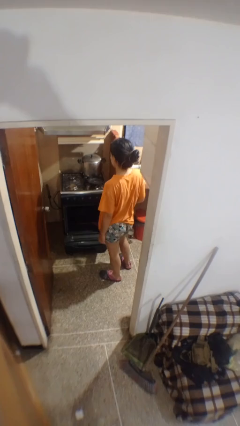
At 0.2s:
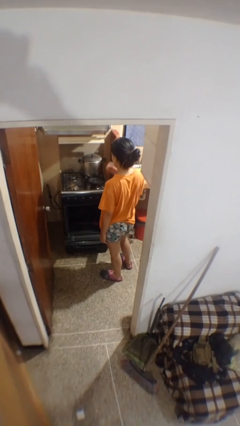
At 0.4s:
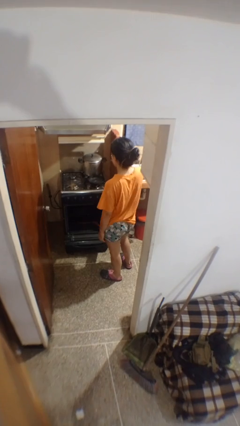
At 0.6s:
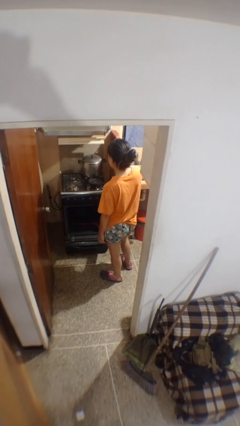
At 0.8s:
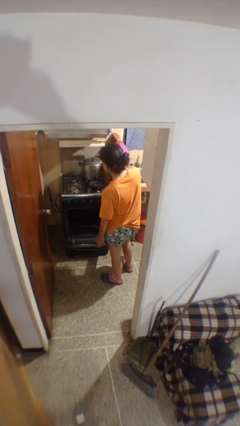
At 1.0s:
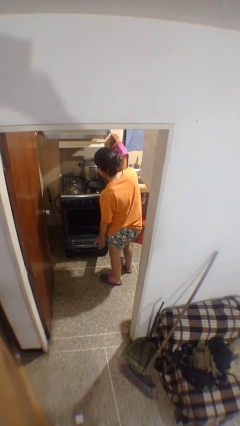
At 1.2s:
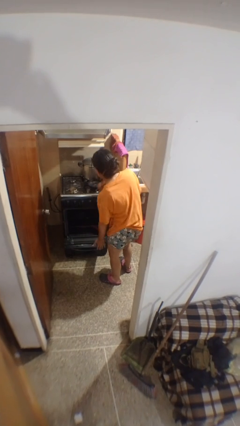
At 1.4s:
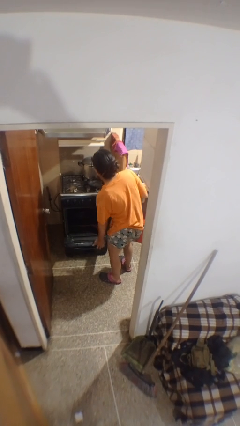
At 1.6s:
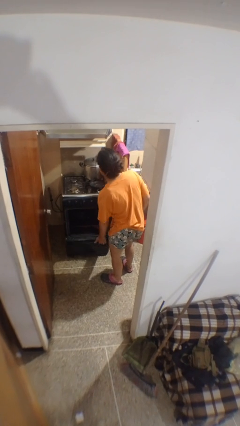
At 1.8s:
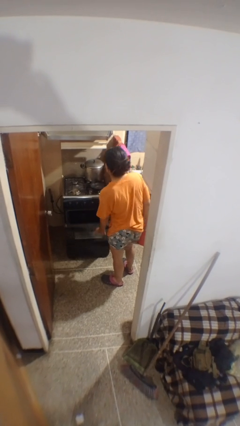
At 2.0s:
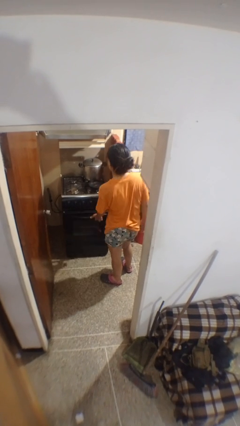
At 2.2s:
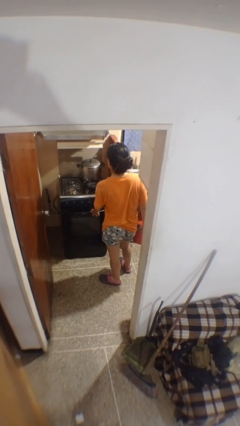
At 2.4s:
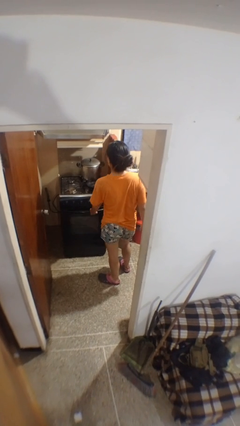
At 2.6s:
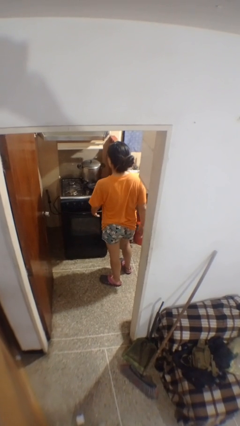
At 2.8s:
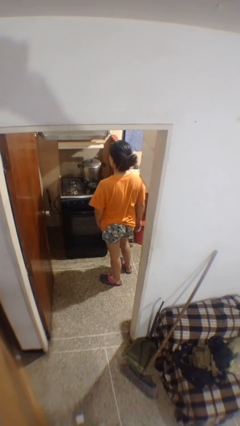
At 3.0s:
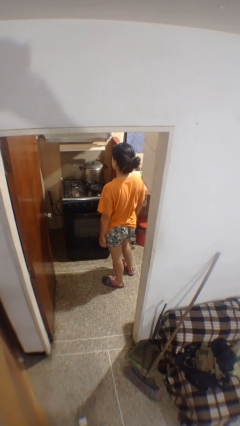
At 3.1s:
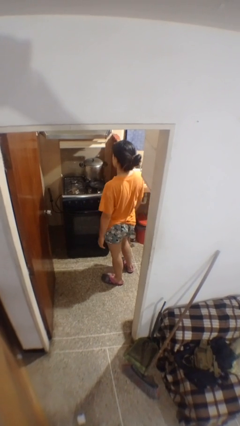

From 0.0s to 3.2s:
person closes oven door

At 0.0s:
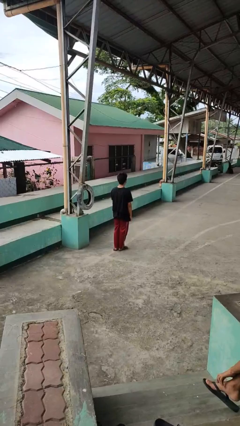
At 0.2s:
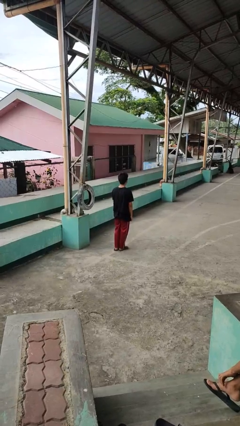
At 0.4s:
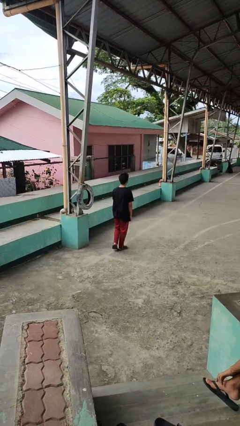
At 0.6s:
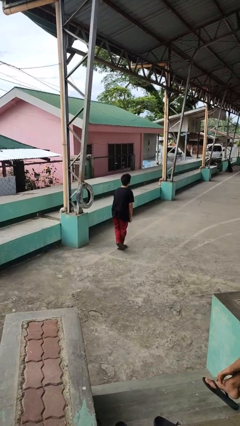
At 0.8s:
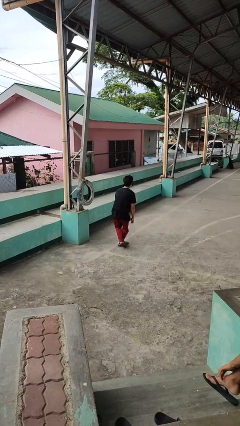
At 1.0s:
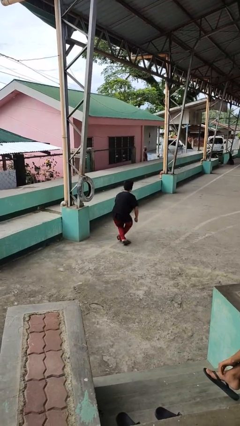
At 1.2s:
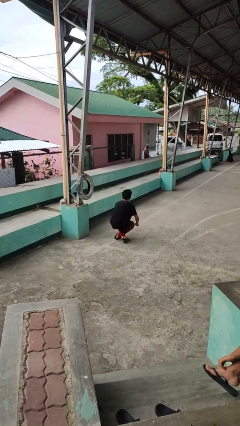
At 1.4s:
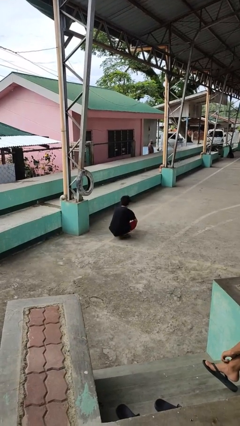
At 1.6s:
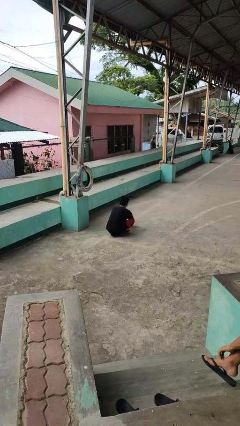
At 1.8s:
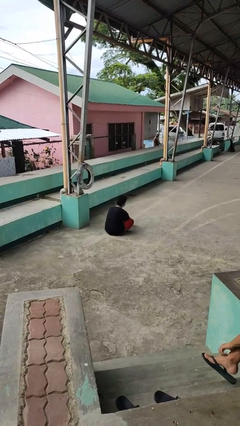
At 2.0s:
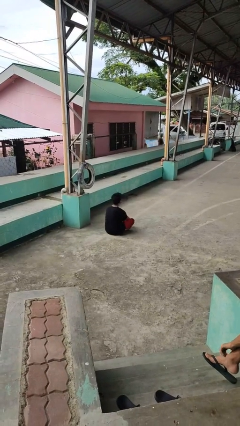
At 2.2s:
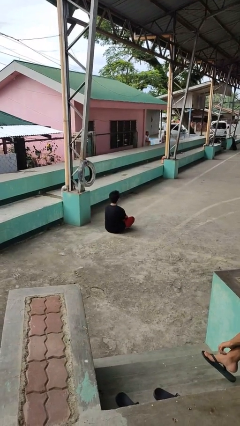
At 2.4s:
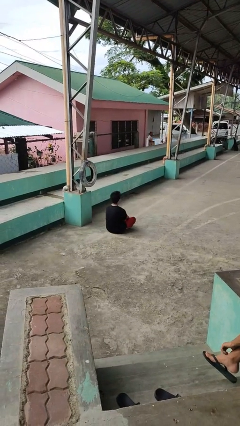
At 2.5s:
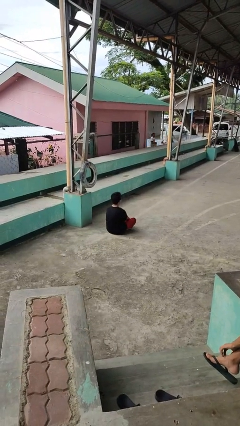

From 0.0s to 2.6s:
person sits crisscross

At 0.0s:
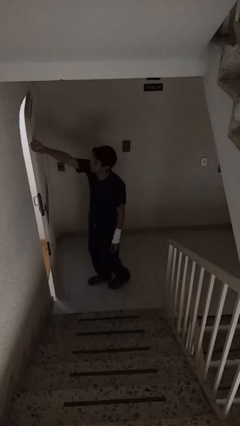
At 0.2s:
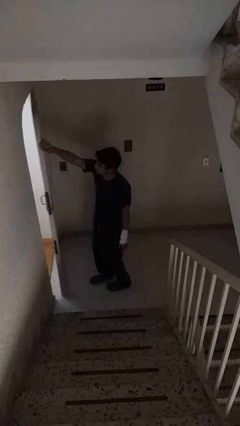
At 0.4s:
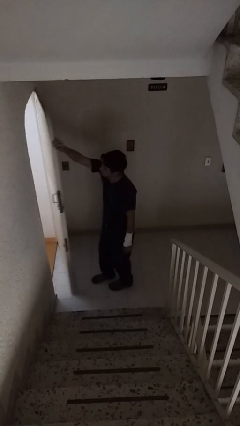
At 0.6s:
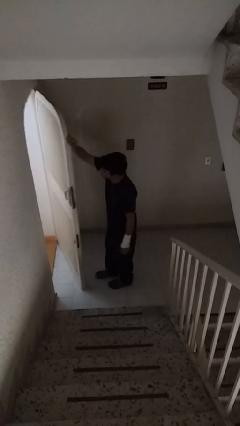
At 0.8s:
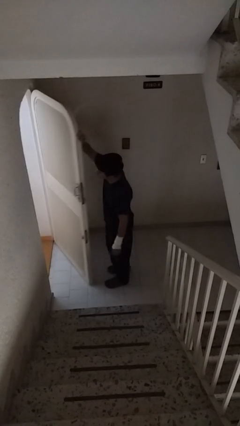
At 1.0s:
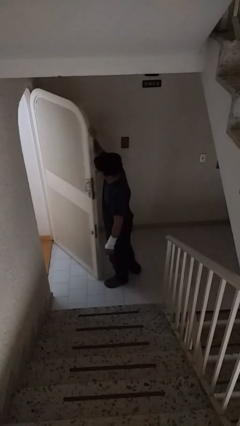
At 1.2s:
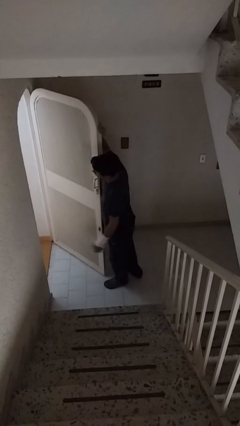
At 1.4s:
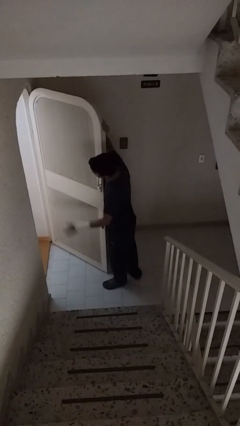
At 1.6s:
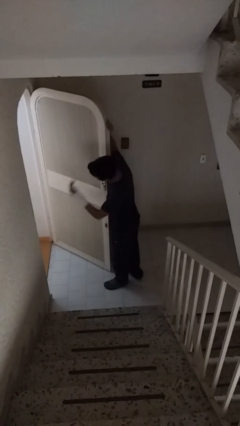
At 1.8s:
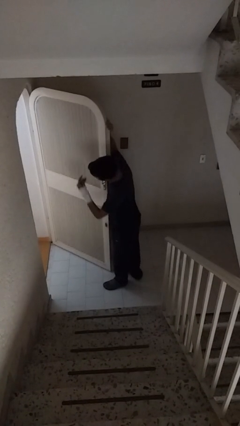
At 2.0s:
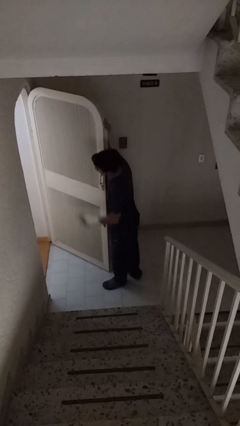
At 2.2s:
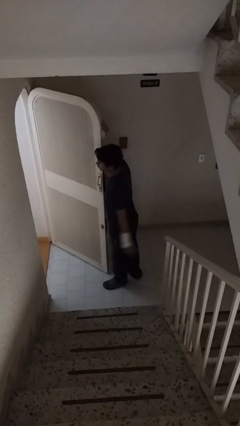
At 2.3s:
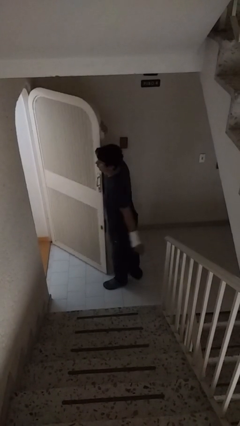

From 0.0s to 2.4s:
person opens facility door

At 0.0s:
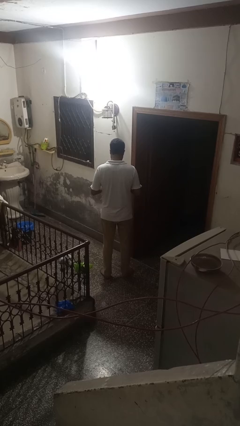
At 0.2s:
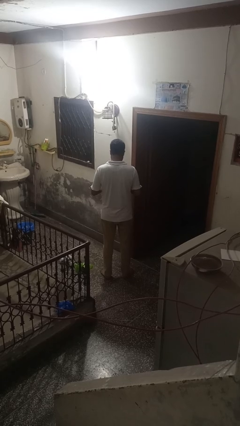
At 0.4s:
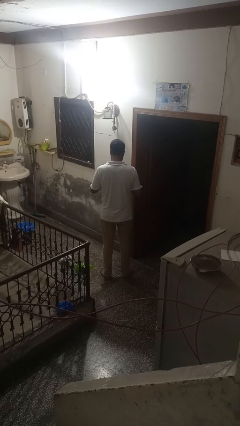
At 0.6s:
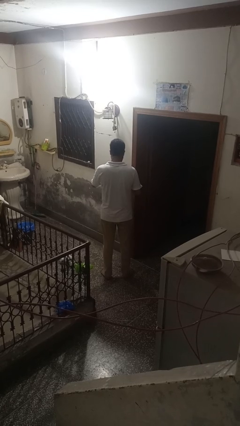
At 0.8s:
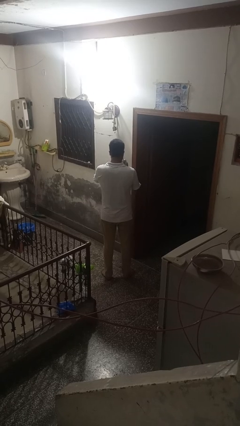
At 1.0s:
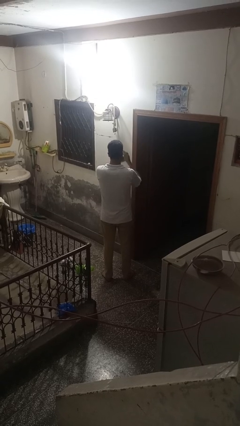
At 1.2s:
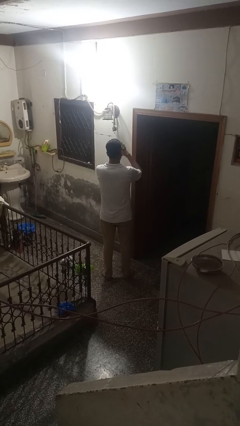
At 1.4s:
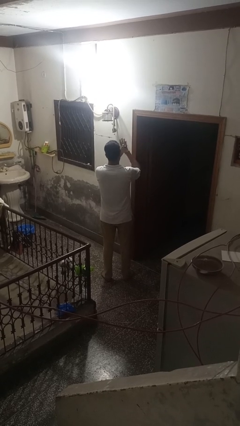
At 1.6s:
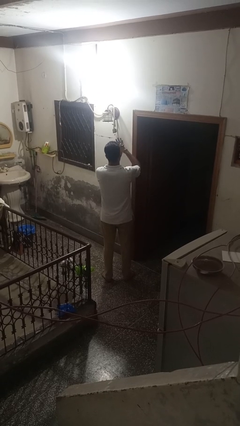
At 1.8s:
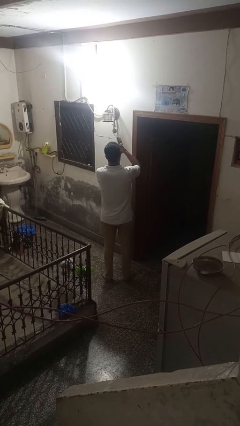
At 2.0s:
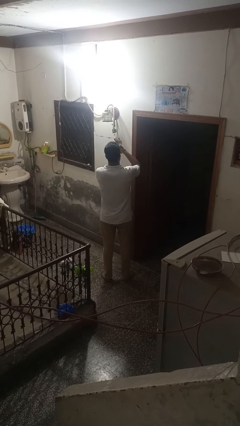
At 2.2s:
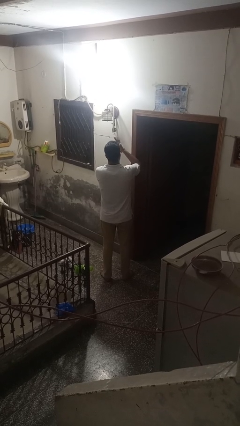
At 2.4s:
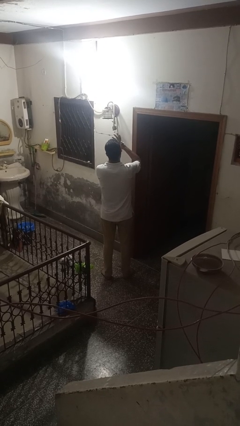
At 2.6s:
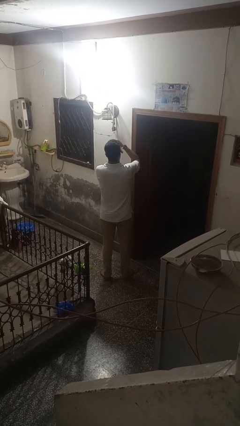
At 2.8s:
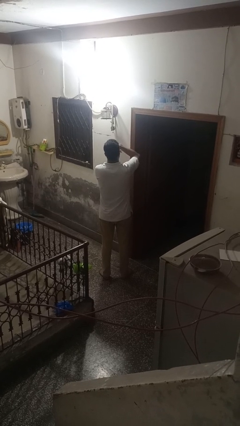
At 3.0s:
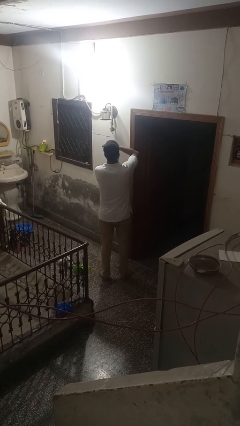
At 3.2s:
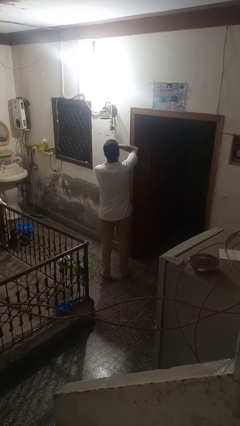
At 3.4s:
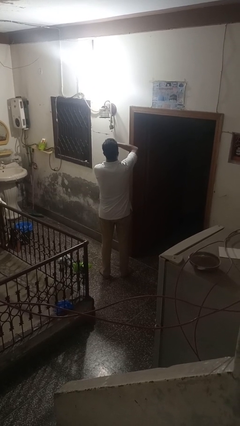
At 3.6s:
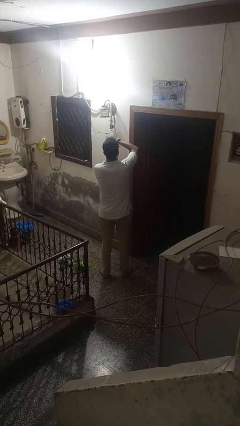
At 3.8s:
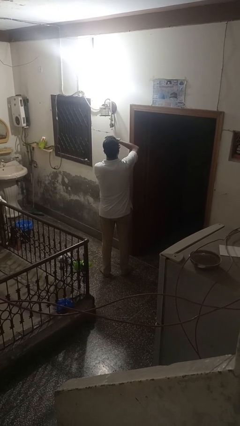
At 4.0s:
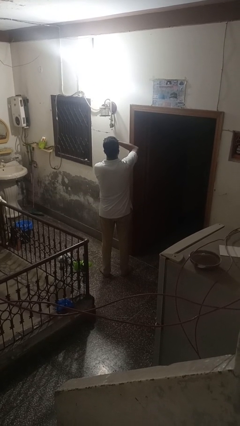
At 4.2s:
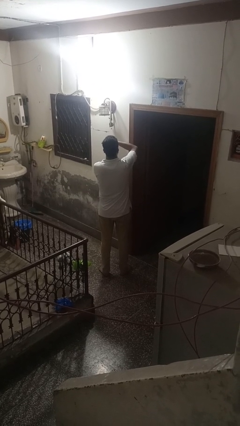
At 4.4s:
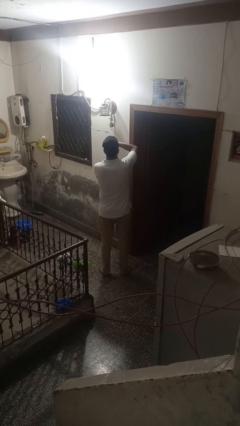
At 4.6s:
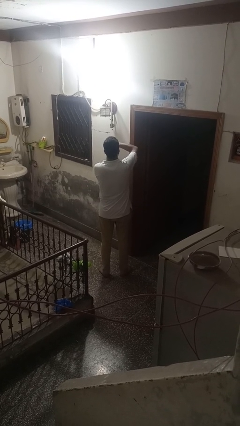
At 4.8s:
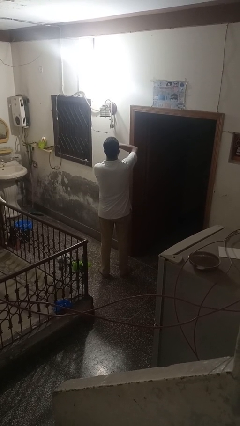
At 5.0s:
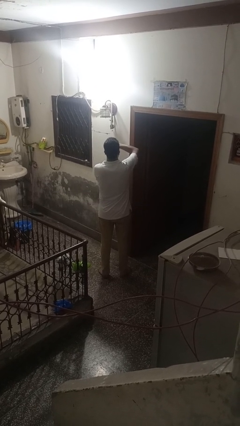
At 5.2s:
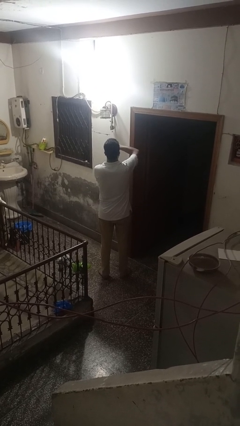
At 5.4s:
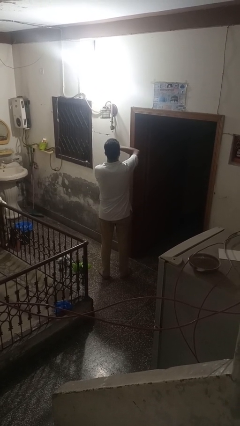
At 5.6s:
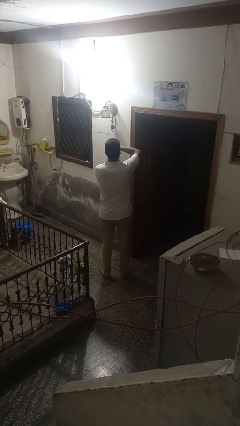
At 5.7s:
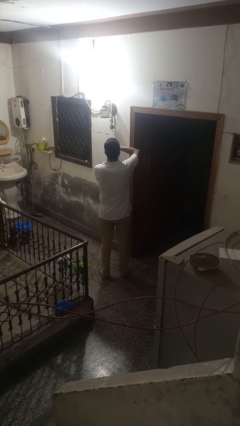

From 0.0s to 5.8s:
person puts on wristwatch

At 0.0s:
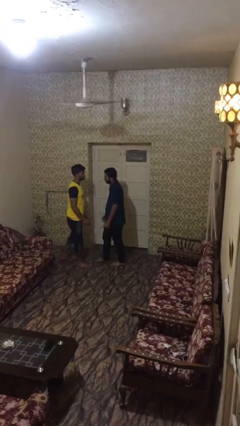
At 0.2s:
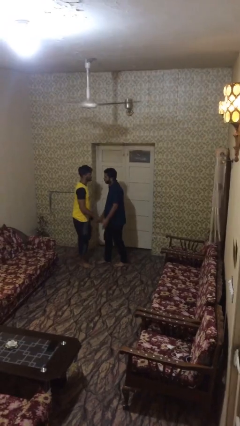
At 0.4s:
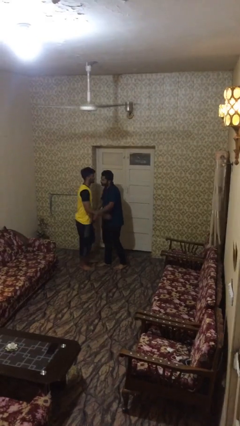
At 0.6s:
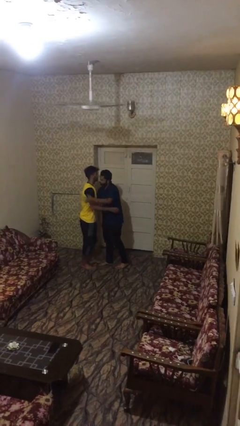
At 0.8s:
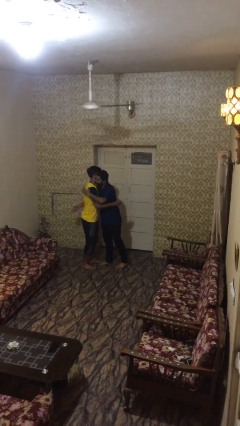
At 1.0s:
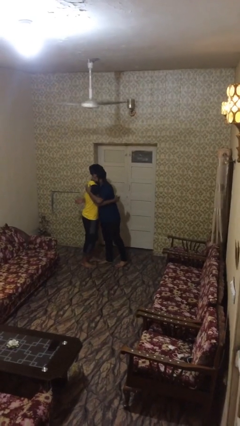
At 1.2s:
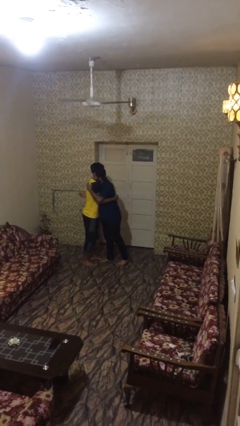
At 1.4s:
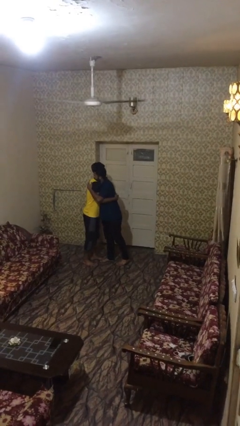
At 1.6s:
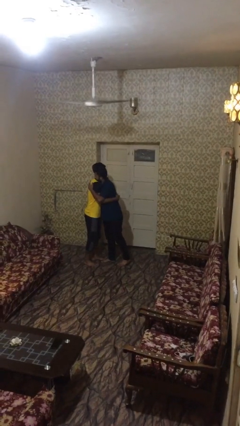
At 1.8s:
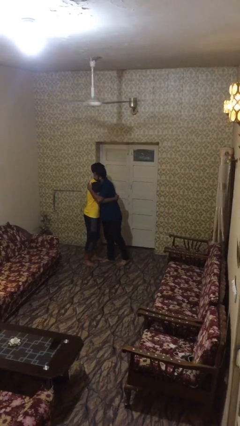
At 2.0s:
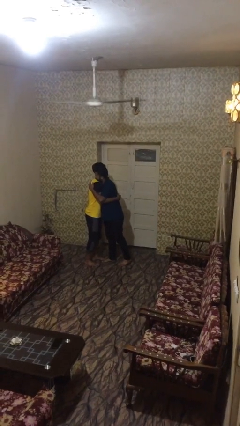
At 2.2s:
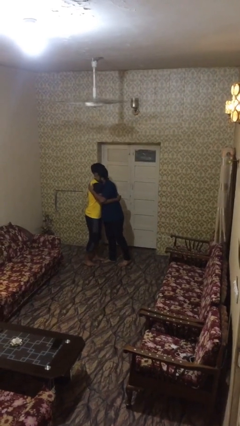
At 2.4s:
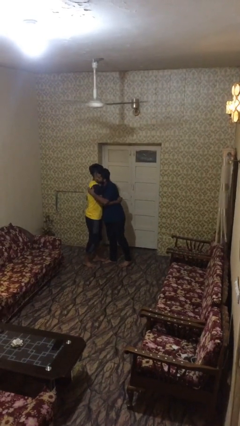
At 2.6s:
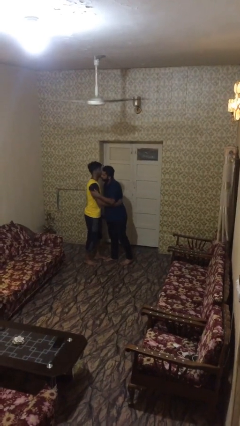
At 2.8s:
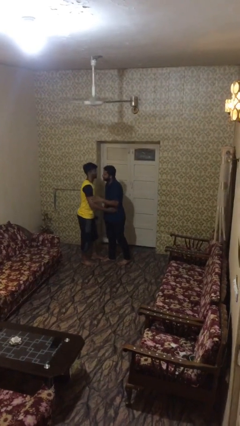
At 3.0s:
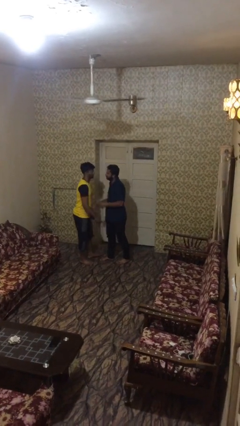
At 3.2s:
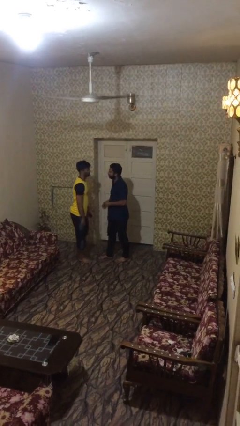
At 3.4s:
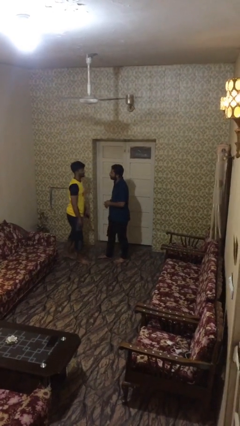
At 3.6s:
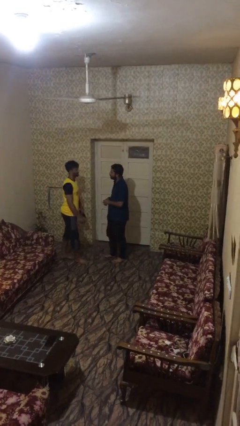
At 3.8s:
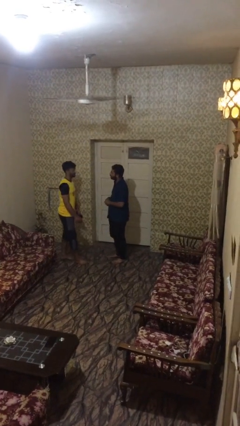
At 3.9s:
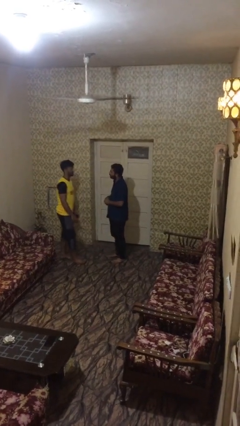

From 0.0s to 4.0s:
person embraces person
